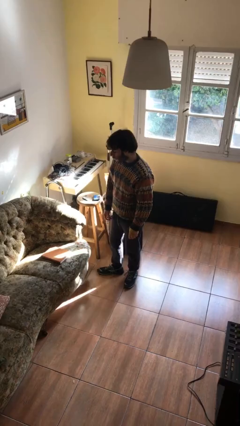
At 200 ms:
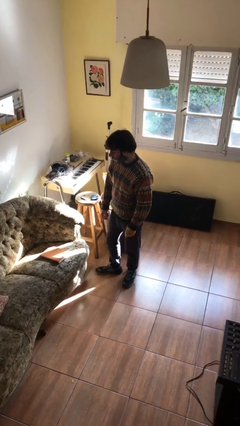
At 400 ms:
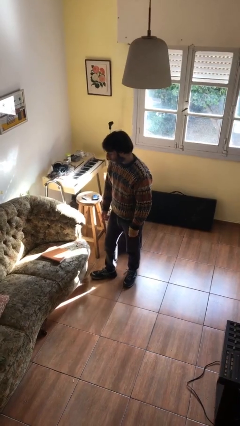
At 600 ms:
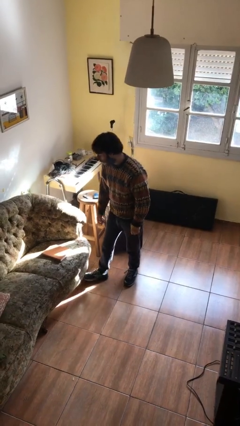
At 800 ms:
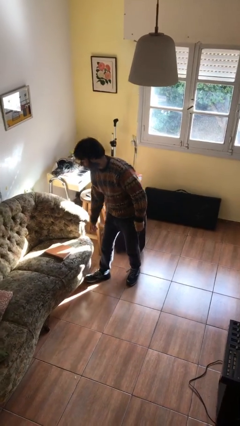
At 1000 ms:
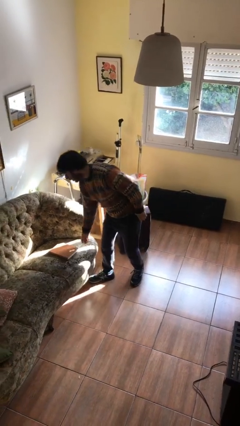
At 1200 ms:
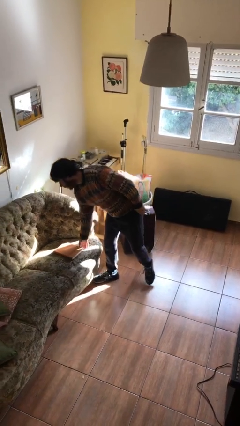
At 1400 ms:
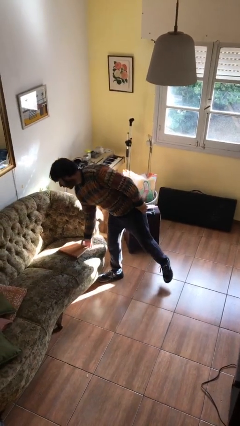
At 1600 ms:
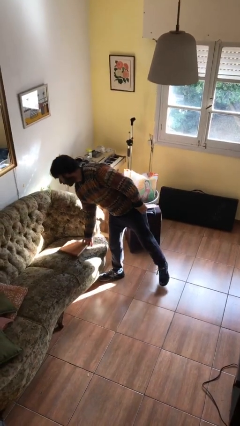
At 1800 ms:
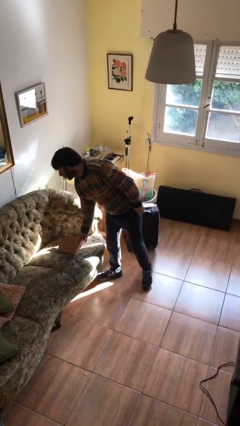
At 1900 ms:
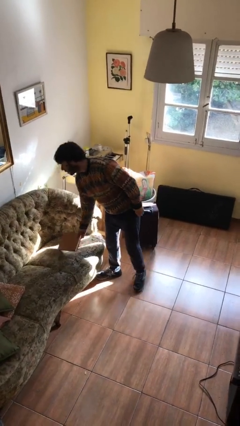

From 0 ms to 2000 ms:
person picks up object from couch

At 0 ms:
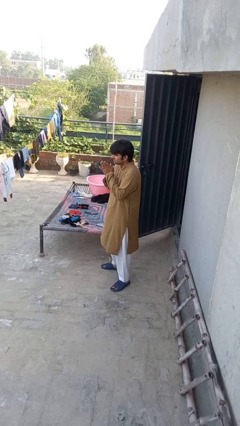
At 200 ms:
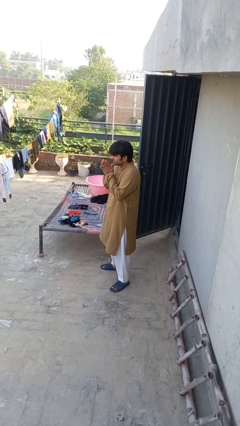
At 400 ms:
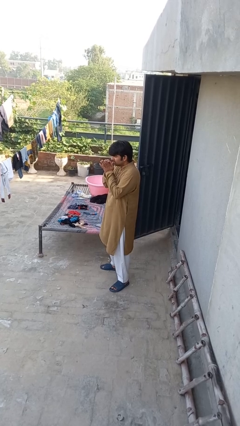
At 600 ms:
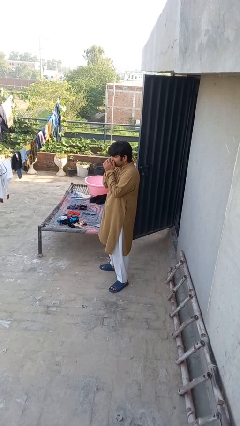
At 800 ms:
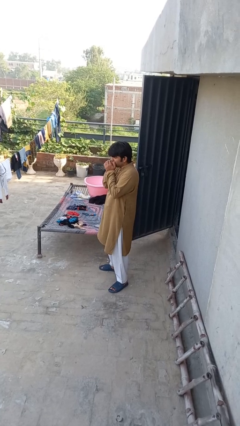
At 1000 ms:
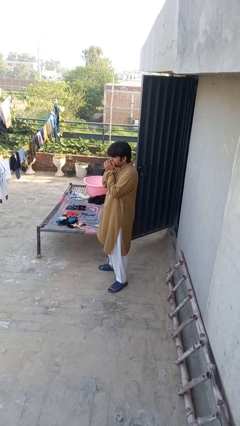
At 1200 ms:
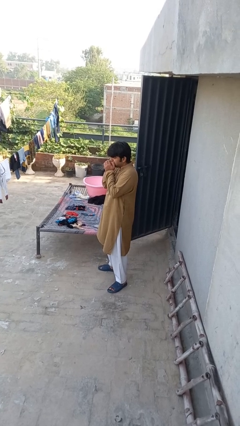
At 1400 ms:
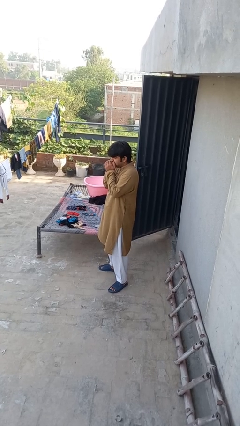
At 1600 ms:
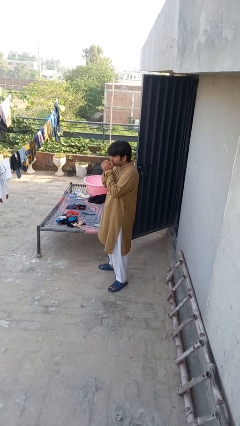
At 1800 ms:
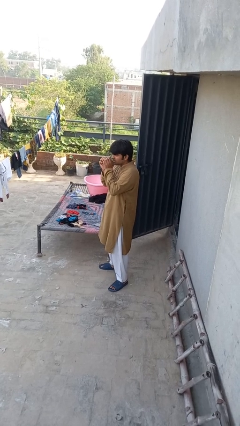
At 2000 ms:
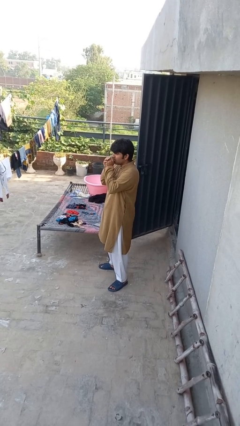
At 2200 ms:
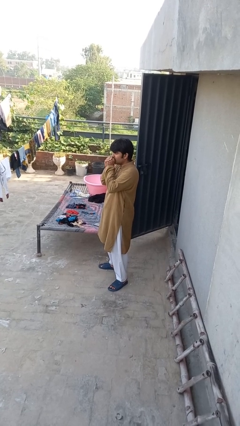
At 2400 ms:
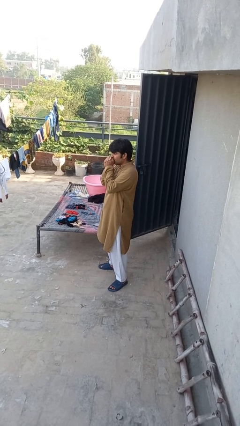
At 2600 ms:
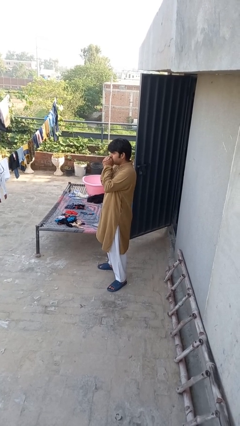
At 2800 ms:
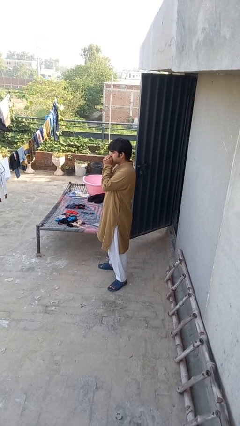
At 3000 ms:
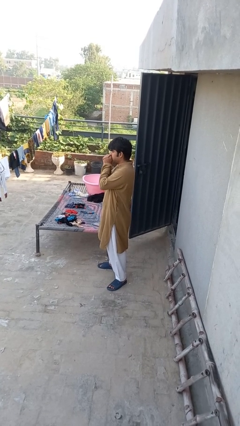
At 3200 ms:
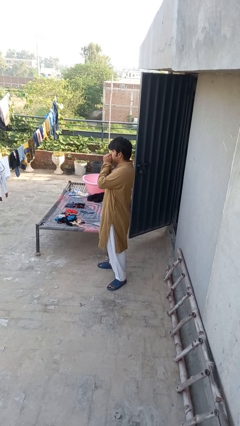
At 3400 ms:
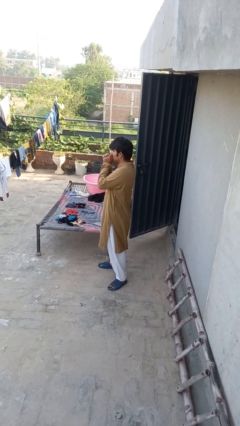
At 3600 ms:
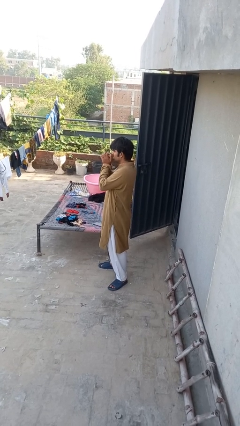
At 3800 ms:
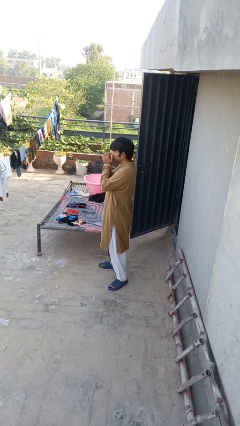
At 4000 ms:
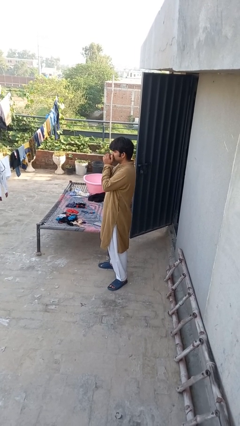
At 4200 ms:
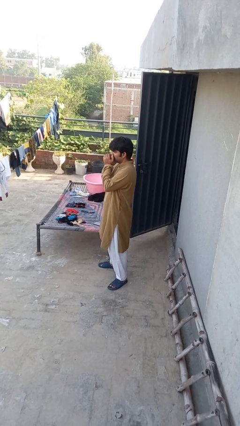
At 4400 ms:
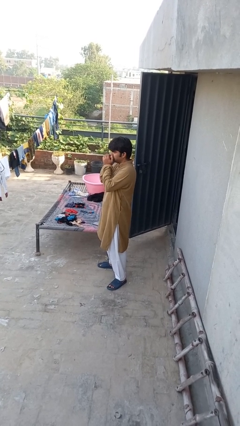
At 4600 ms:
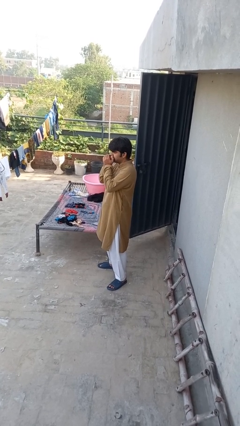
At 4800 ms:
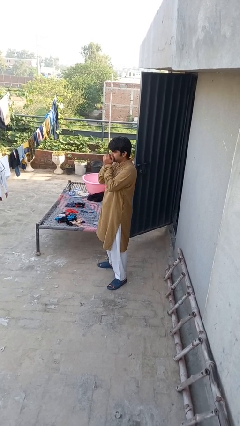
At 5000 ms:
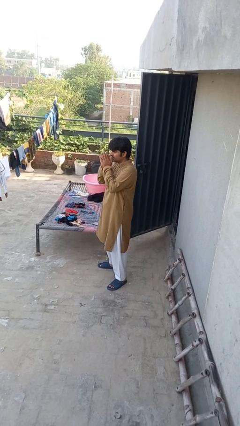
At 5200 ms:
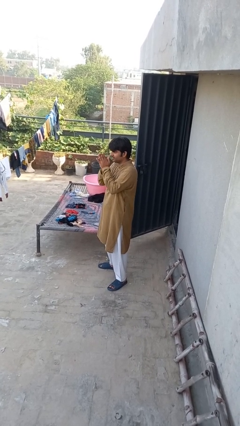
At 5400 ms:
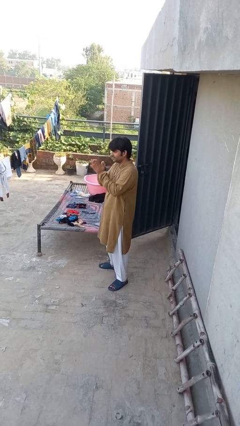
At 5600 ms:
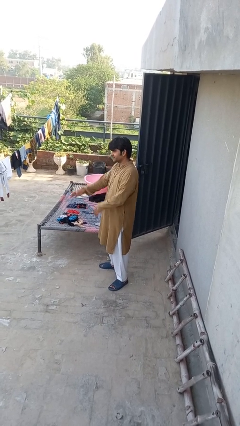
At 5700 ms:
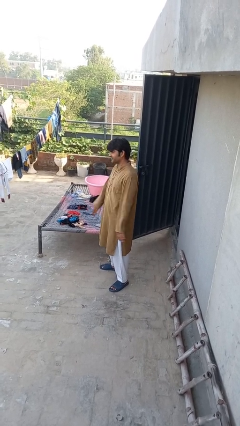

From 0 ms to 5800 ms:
person blows into hands

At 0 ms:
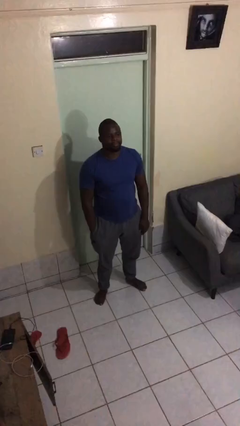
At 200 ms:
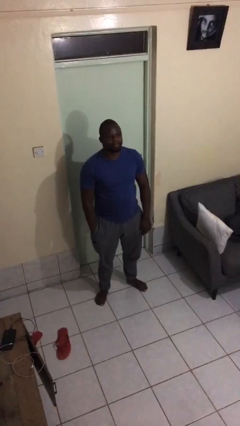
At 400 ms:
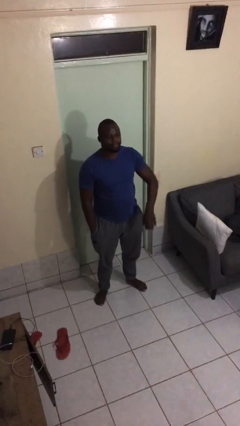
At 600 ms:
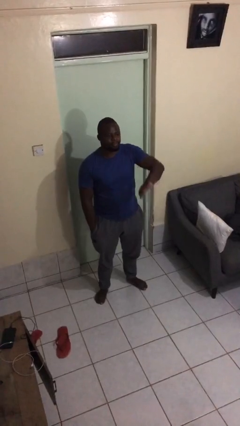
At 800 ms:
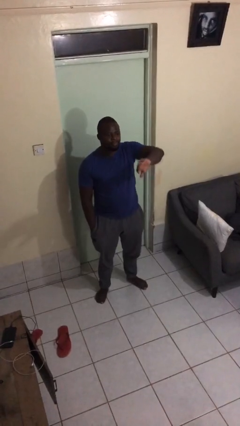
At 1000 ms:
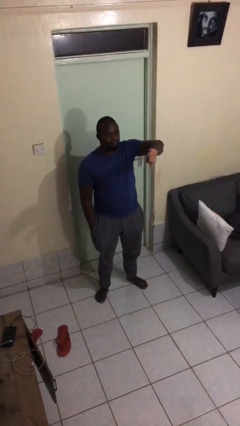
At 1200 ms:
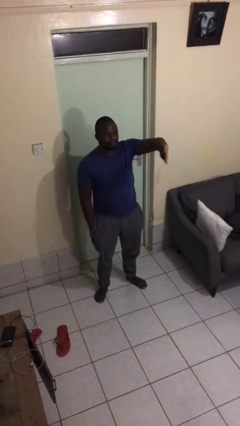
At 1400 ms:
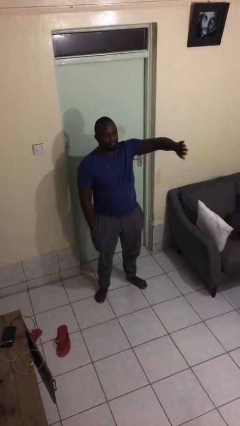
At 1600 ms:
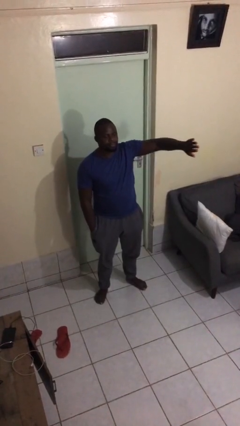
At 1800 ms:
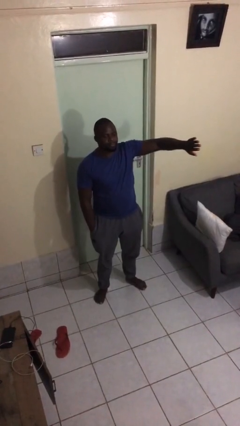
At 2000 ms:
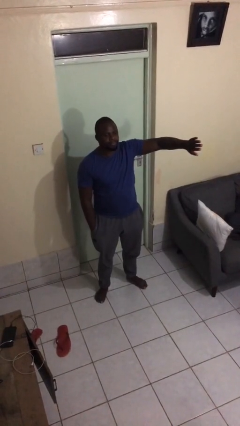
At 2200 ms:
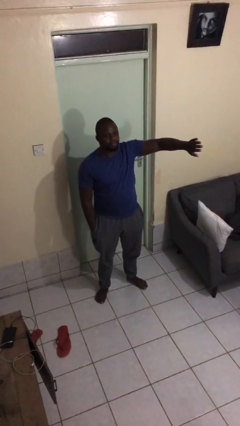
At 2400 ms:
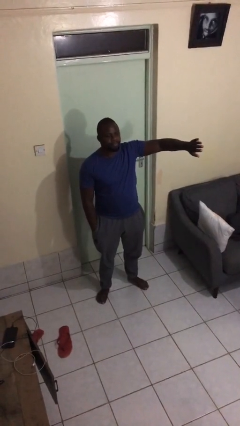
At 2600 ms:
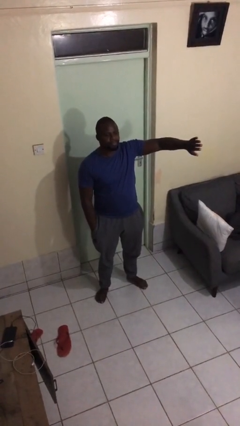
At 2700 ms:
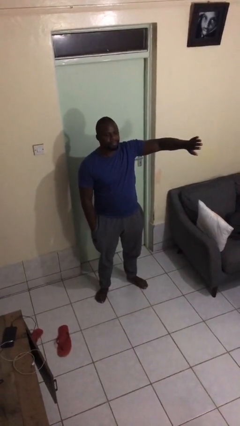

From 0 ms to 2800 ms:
person gestures swipe left

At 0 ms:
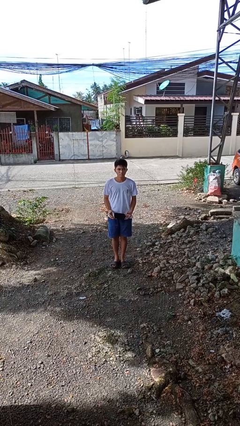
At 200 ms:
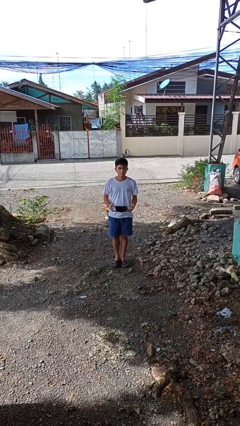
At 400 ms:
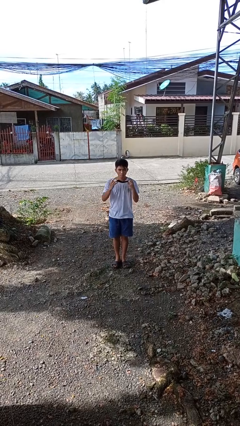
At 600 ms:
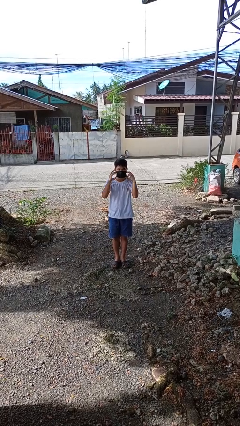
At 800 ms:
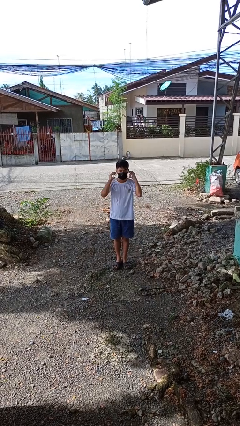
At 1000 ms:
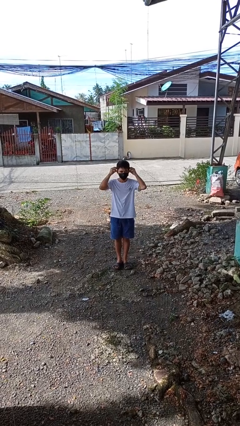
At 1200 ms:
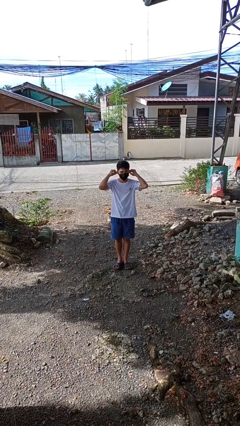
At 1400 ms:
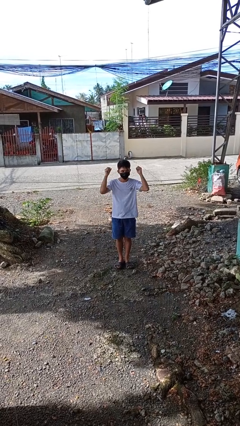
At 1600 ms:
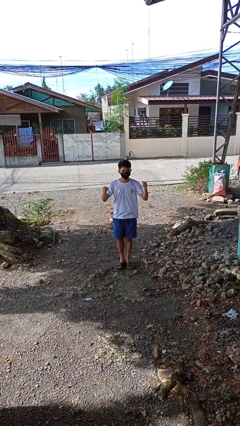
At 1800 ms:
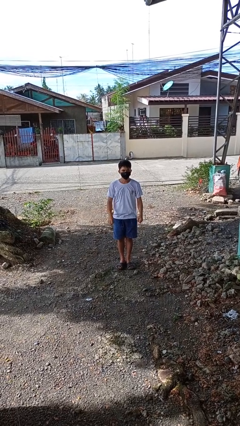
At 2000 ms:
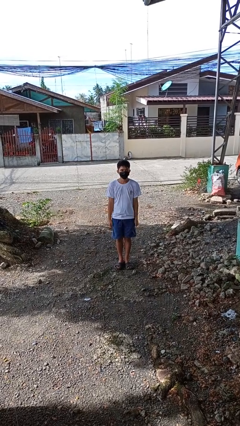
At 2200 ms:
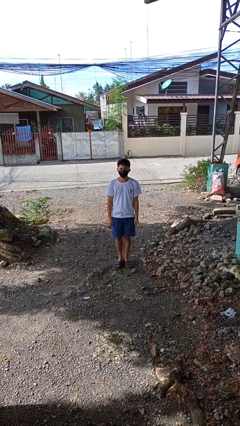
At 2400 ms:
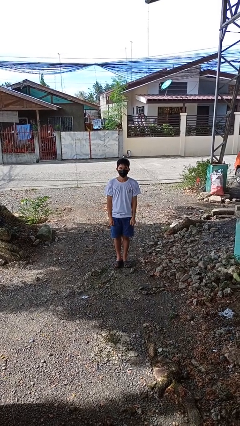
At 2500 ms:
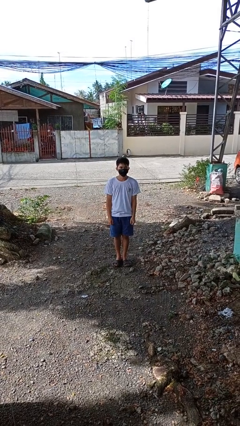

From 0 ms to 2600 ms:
person puts on facemask

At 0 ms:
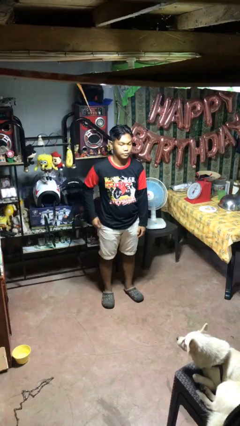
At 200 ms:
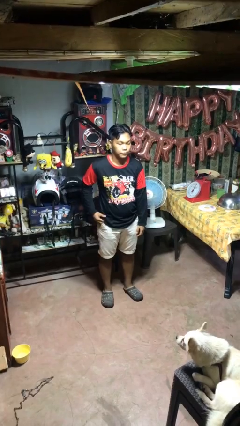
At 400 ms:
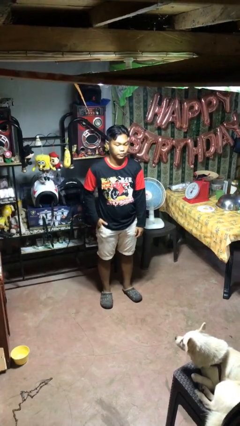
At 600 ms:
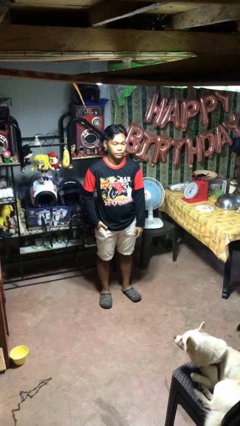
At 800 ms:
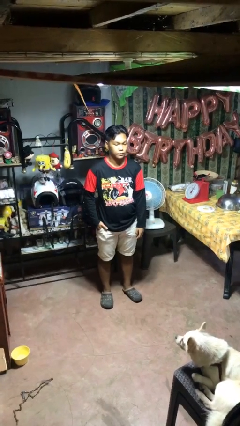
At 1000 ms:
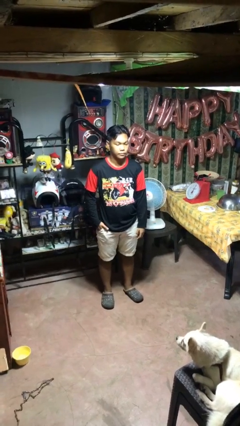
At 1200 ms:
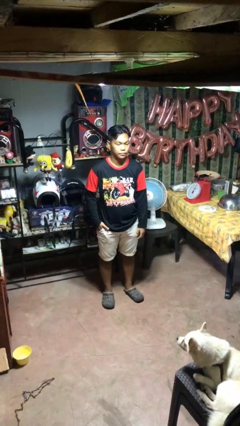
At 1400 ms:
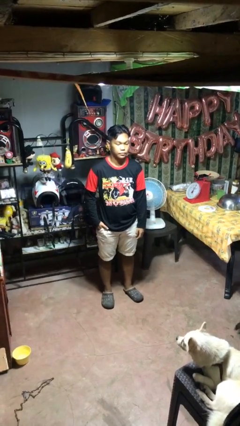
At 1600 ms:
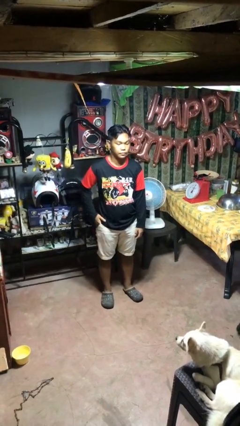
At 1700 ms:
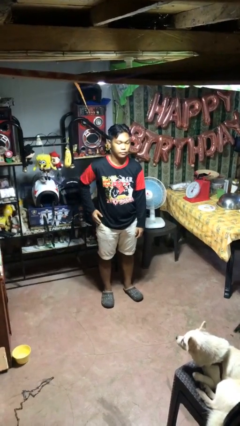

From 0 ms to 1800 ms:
person puts hands in back pockets

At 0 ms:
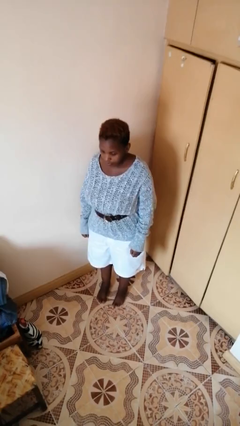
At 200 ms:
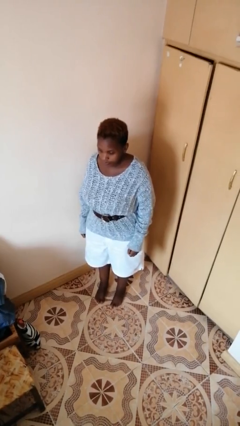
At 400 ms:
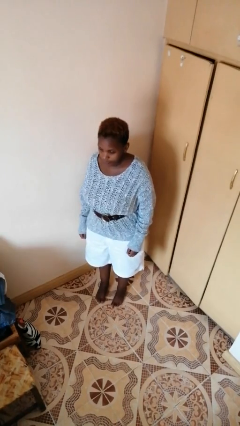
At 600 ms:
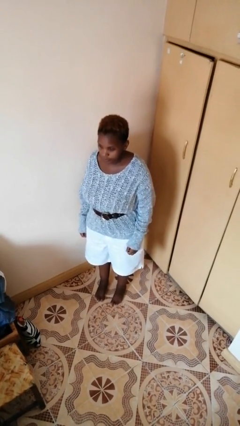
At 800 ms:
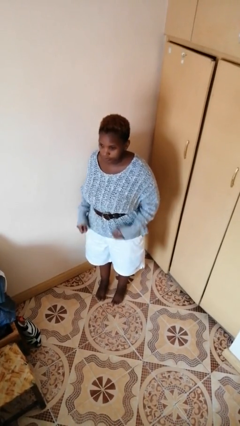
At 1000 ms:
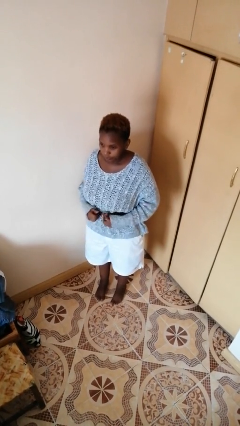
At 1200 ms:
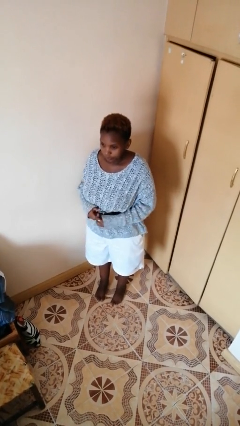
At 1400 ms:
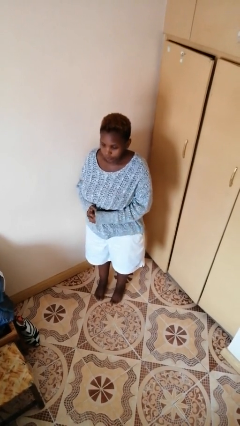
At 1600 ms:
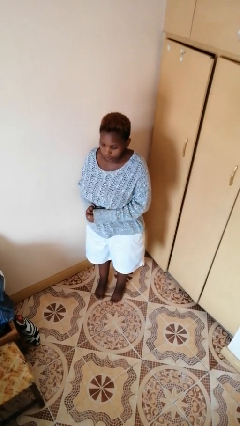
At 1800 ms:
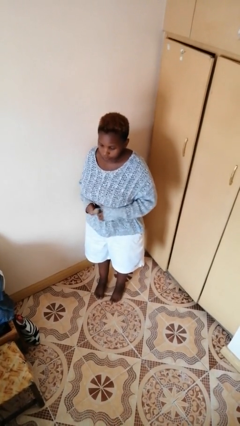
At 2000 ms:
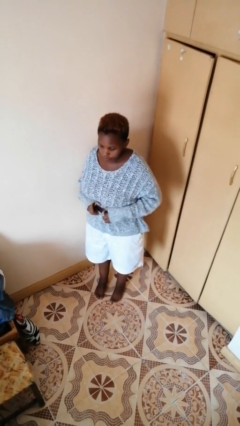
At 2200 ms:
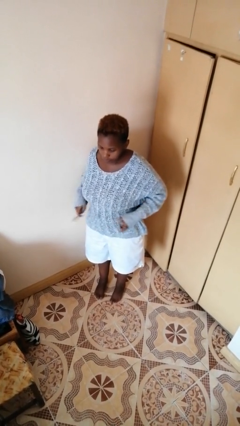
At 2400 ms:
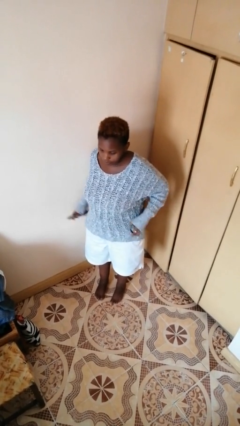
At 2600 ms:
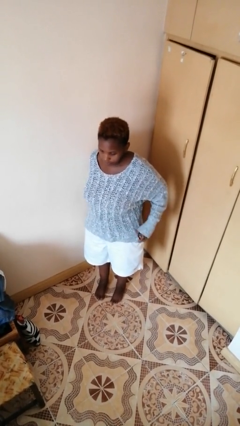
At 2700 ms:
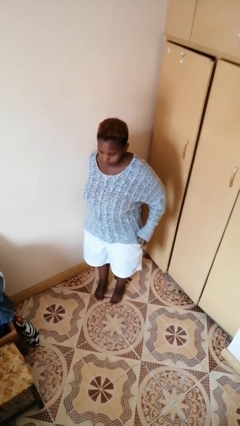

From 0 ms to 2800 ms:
person takes off belt
